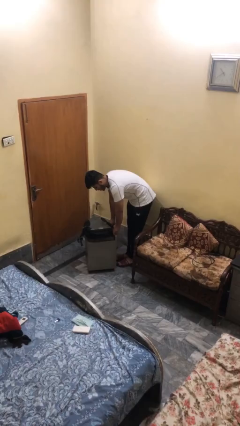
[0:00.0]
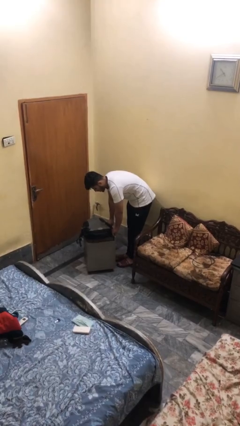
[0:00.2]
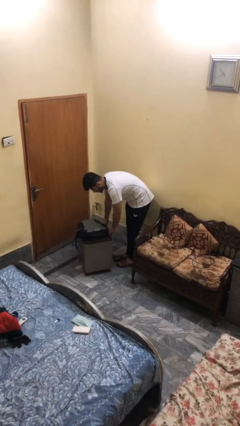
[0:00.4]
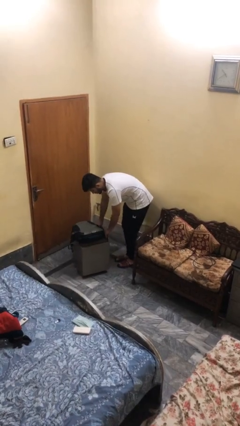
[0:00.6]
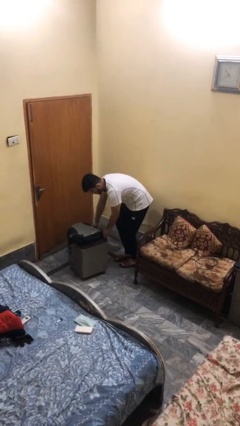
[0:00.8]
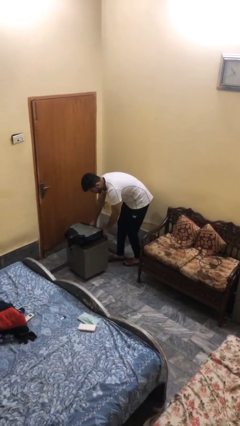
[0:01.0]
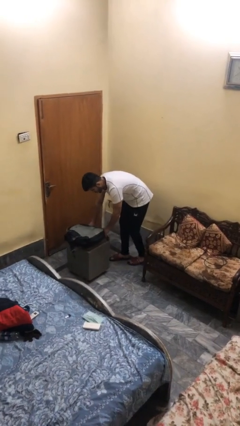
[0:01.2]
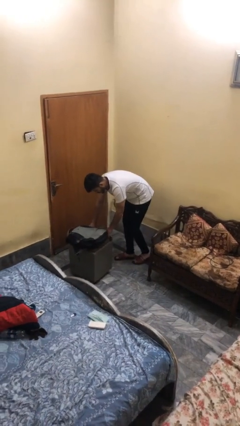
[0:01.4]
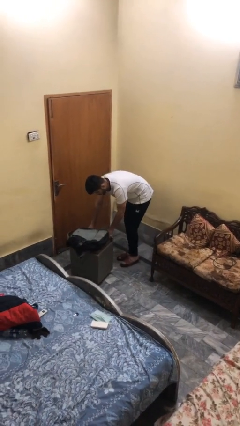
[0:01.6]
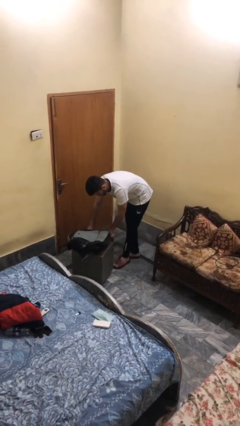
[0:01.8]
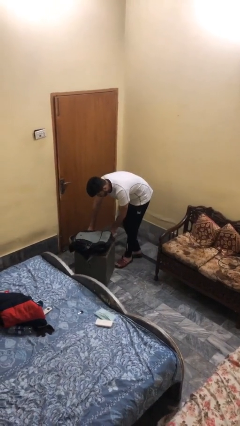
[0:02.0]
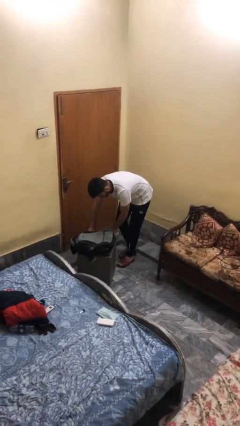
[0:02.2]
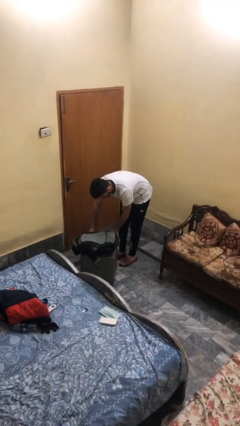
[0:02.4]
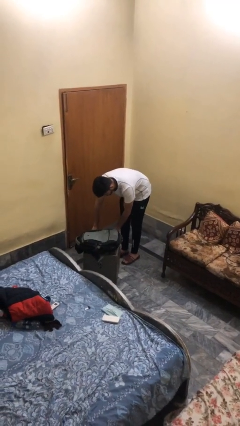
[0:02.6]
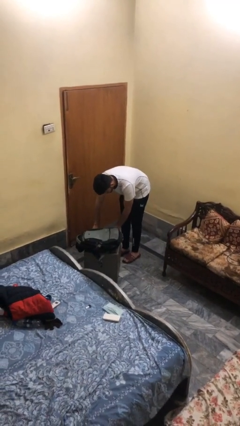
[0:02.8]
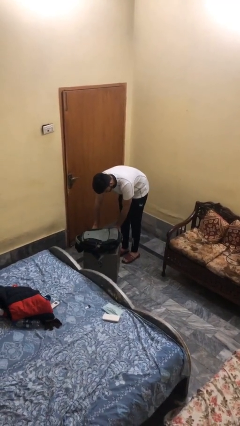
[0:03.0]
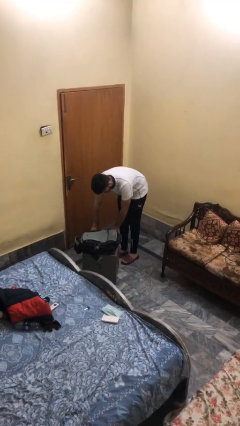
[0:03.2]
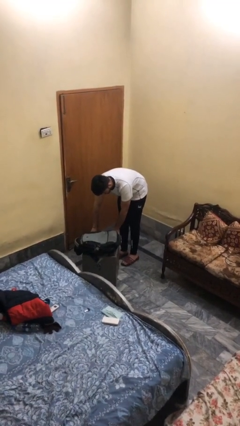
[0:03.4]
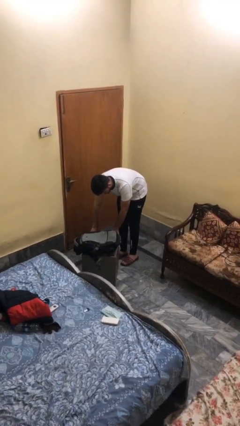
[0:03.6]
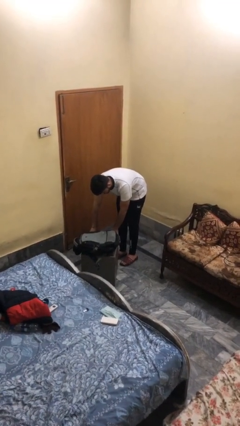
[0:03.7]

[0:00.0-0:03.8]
person pushes wheeled cart

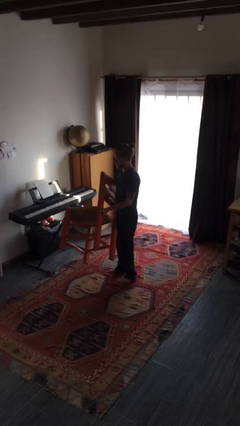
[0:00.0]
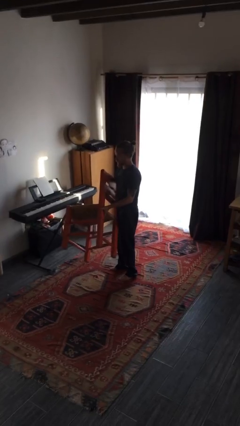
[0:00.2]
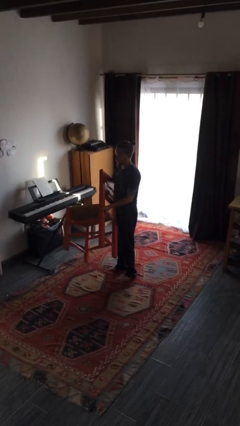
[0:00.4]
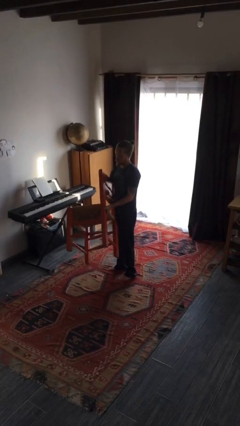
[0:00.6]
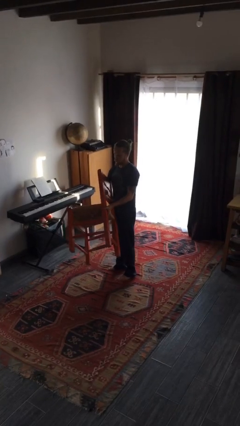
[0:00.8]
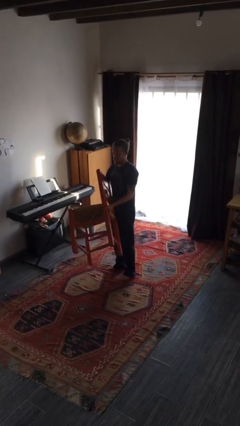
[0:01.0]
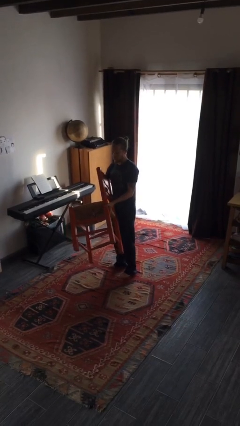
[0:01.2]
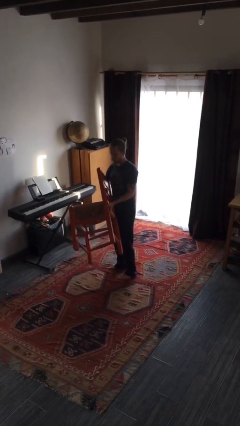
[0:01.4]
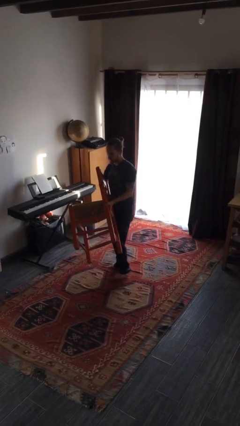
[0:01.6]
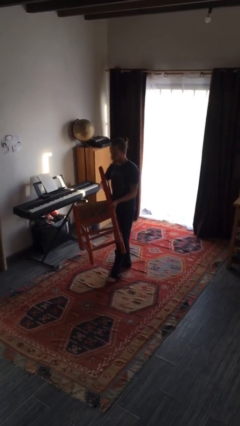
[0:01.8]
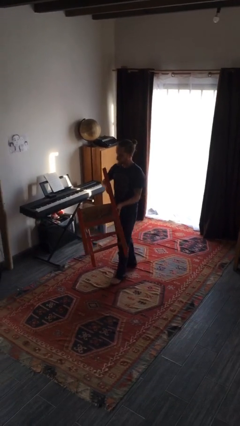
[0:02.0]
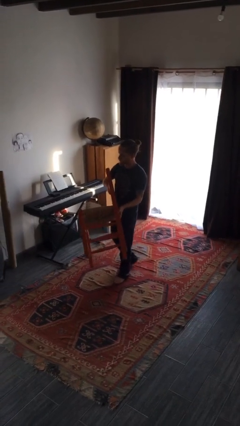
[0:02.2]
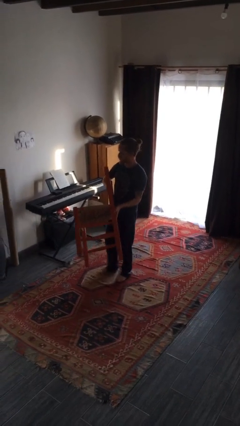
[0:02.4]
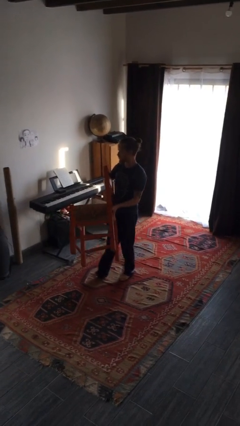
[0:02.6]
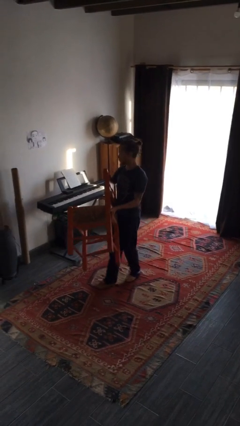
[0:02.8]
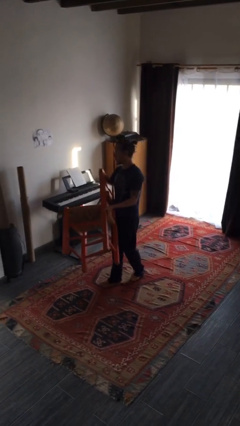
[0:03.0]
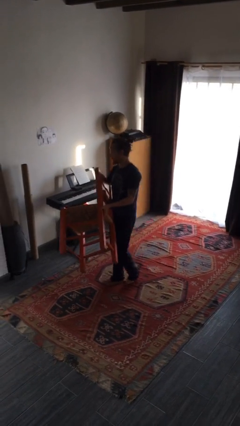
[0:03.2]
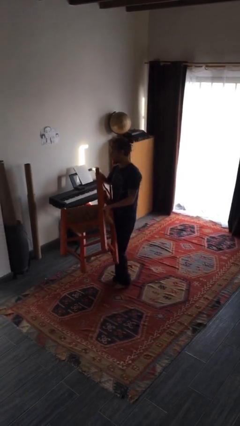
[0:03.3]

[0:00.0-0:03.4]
person carries furniture

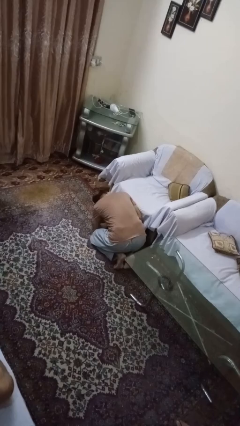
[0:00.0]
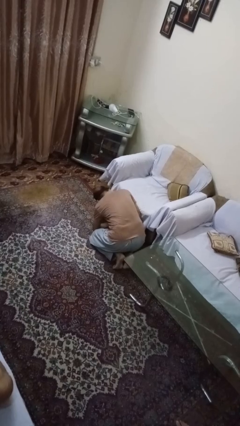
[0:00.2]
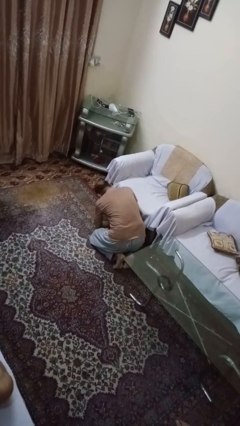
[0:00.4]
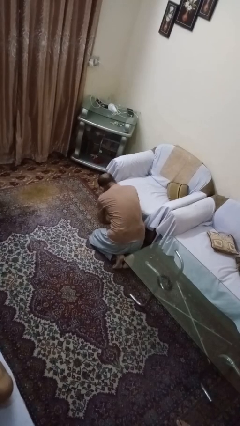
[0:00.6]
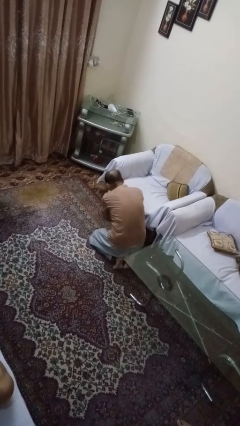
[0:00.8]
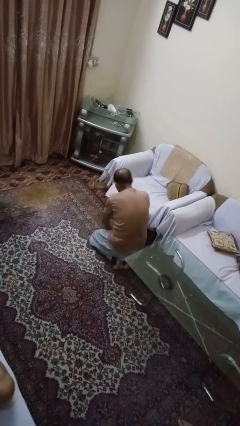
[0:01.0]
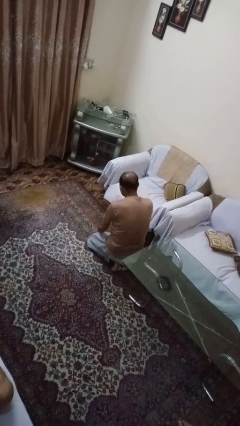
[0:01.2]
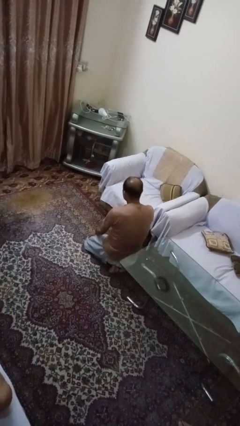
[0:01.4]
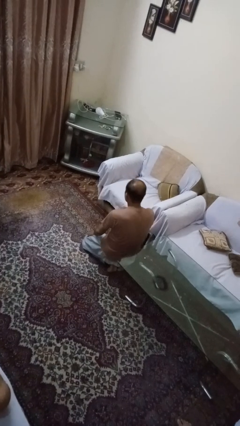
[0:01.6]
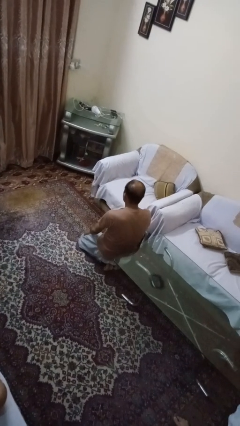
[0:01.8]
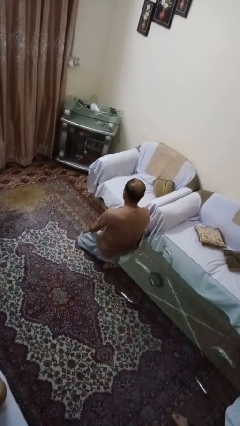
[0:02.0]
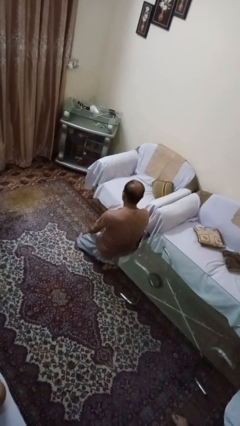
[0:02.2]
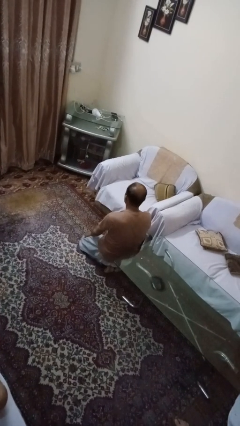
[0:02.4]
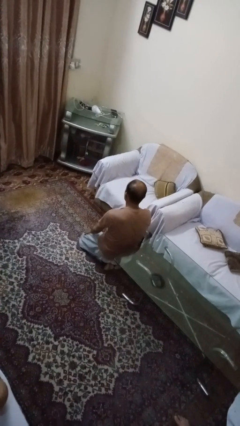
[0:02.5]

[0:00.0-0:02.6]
person searches under couch

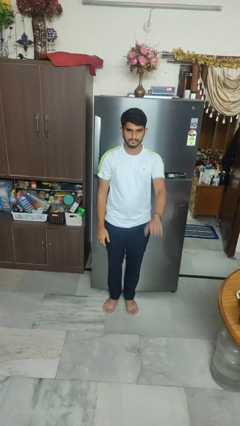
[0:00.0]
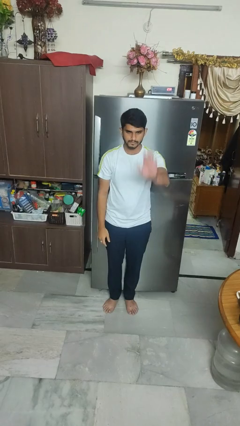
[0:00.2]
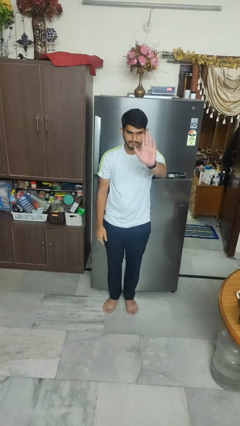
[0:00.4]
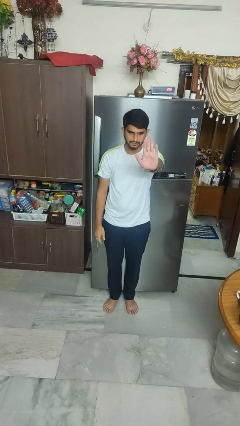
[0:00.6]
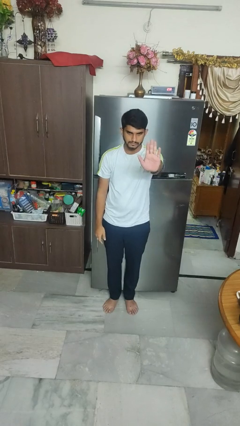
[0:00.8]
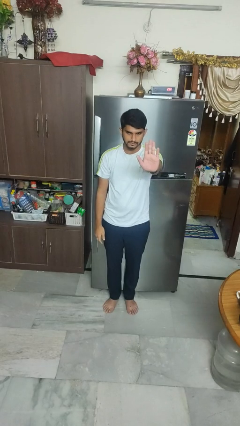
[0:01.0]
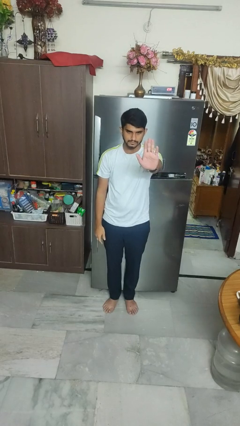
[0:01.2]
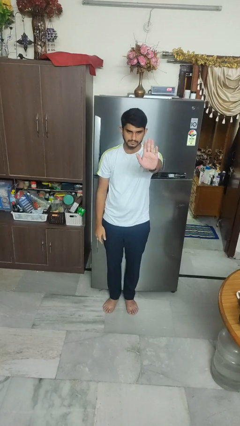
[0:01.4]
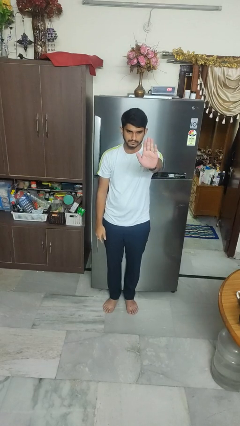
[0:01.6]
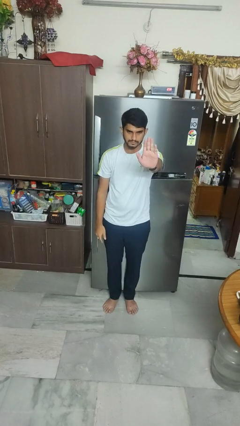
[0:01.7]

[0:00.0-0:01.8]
person gestures stop

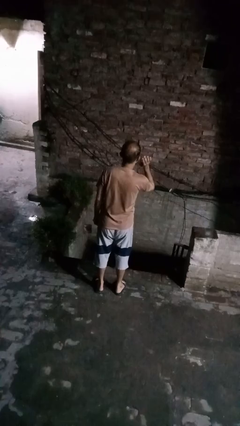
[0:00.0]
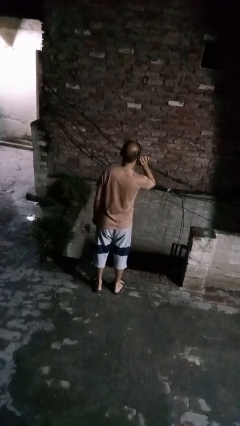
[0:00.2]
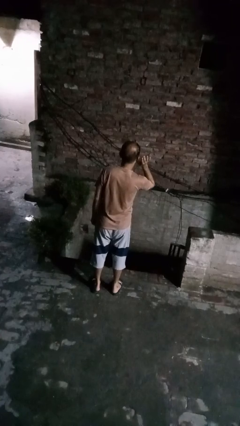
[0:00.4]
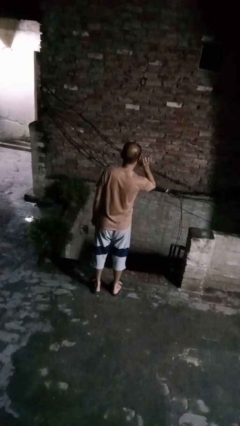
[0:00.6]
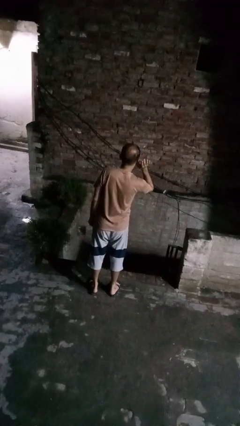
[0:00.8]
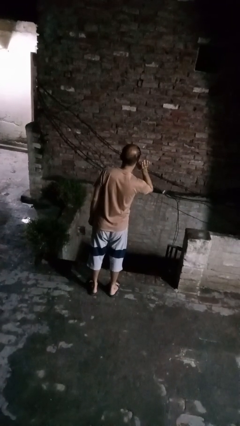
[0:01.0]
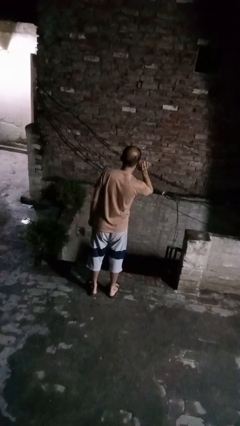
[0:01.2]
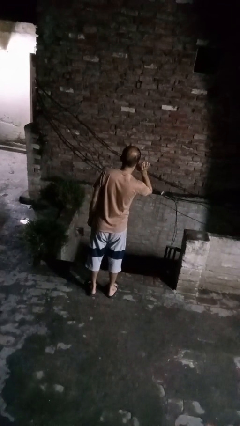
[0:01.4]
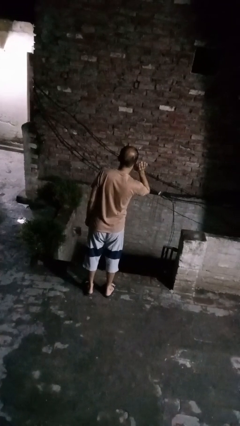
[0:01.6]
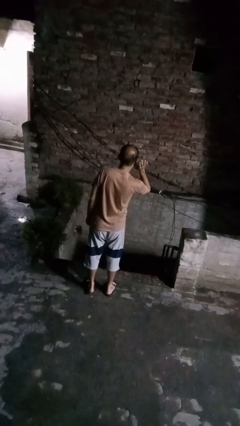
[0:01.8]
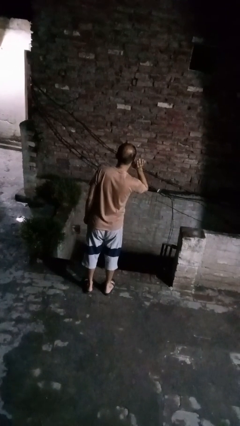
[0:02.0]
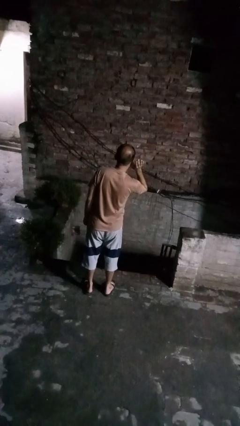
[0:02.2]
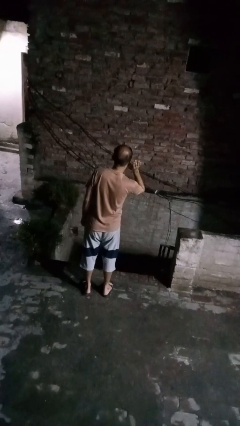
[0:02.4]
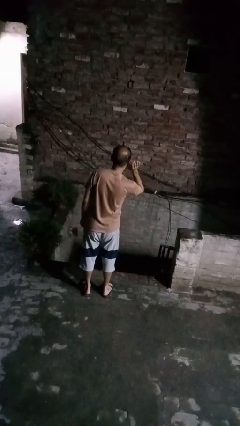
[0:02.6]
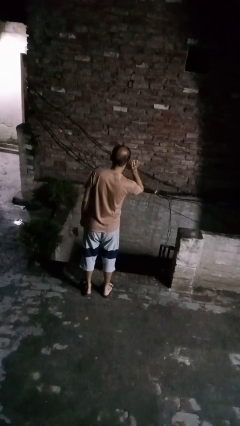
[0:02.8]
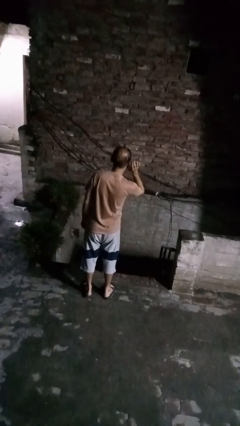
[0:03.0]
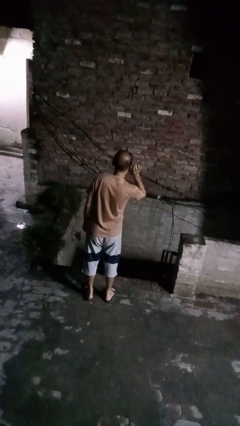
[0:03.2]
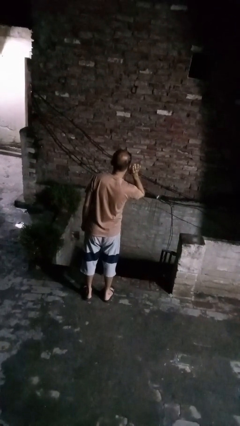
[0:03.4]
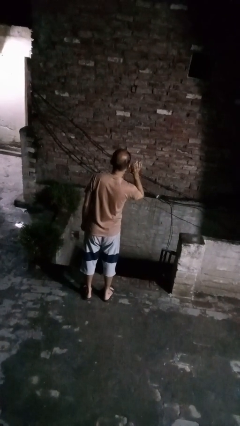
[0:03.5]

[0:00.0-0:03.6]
person gestures listen closely

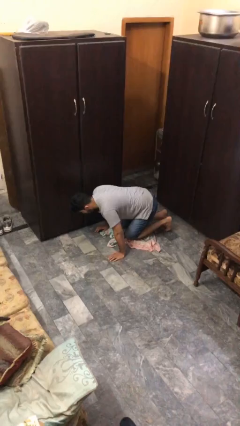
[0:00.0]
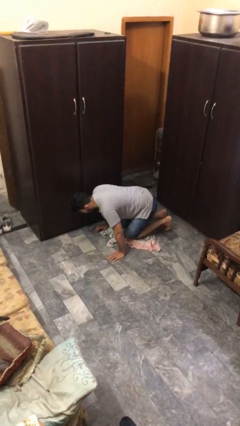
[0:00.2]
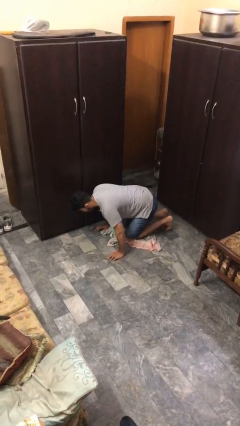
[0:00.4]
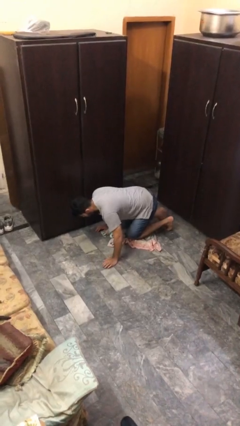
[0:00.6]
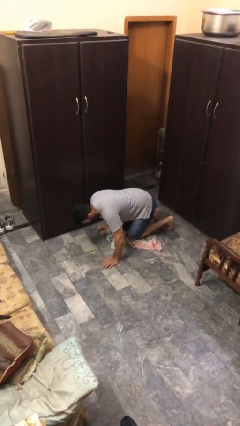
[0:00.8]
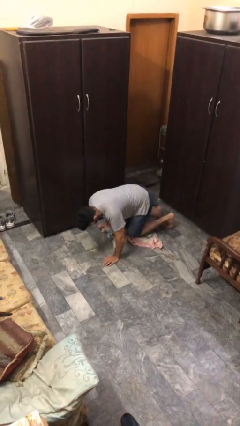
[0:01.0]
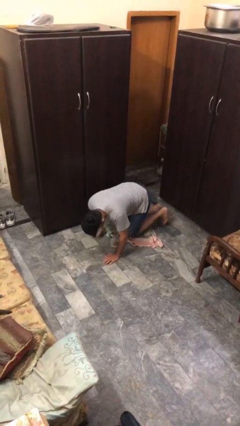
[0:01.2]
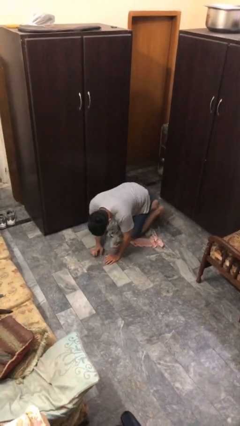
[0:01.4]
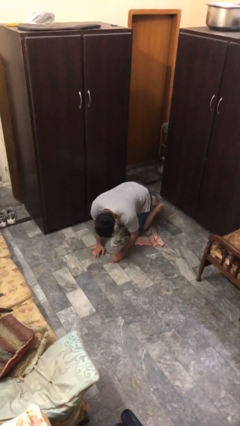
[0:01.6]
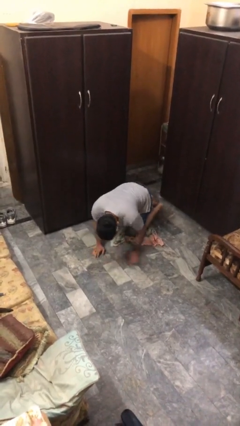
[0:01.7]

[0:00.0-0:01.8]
person crawls

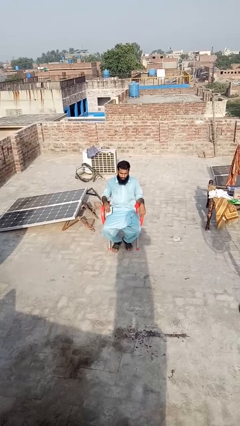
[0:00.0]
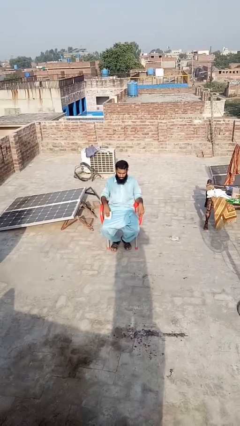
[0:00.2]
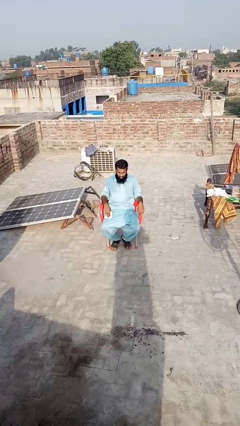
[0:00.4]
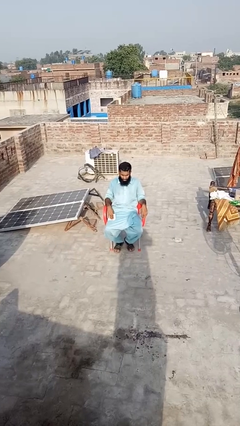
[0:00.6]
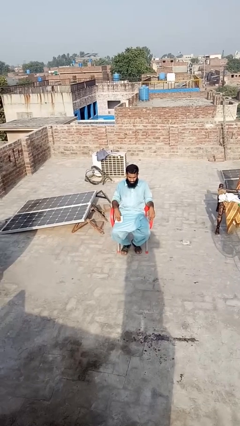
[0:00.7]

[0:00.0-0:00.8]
person wipes mouth with napkin
